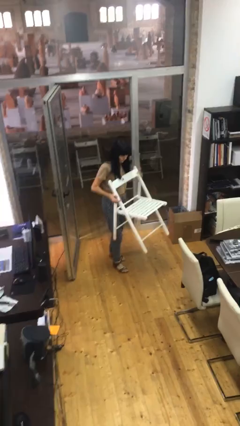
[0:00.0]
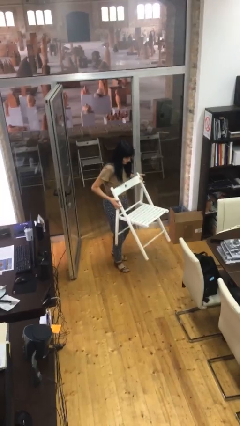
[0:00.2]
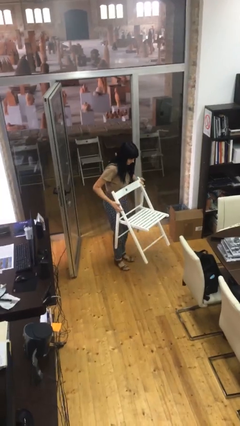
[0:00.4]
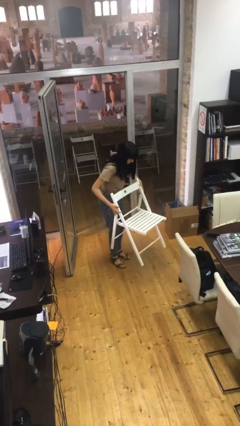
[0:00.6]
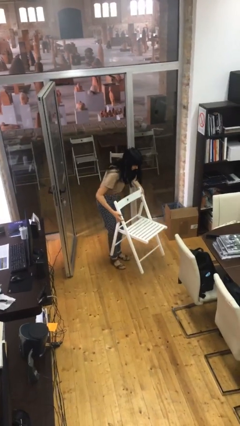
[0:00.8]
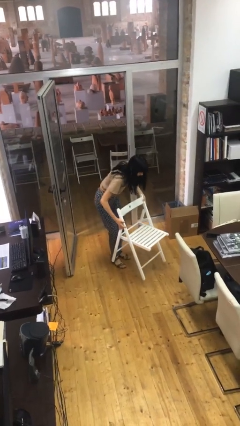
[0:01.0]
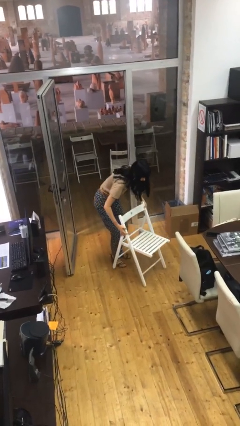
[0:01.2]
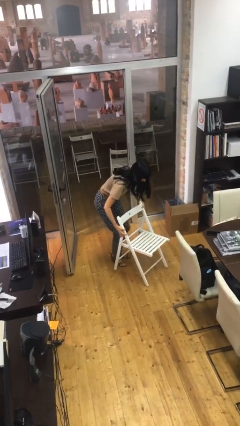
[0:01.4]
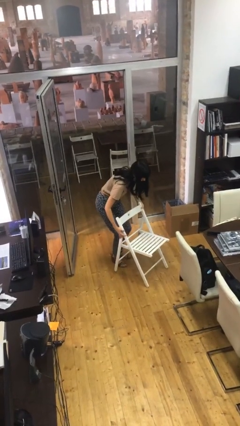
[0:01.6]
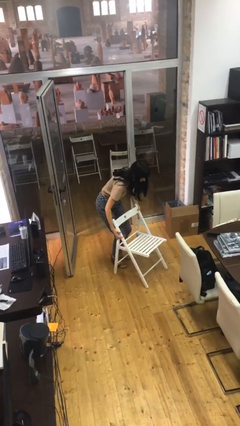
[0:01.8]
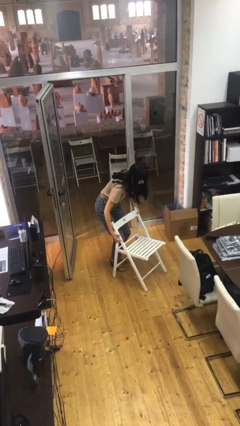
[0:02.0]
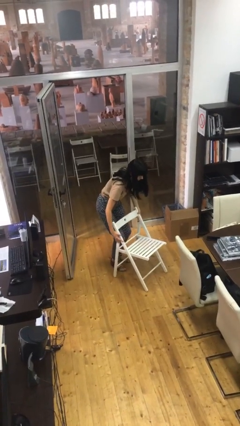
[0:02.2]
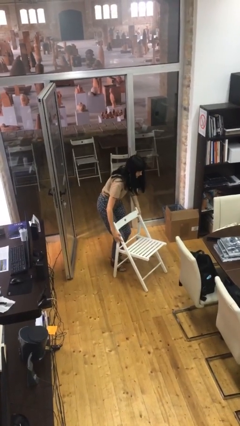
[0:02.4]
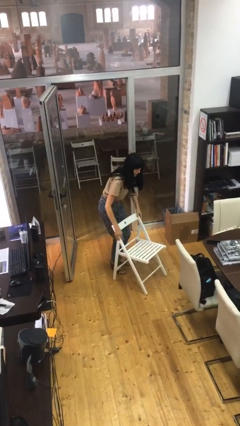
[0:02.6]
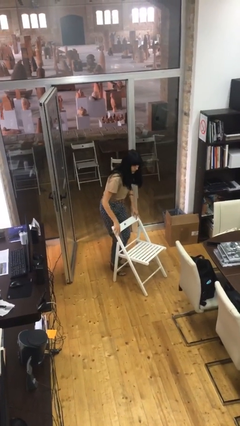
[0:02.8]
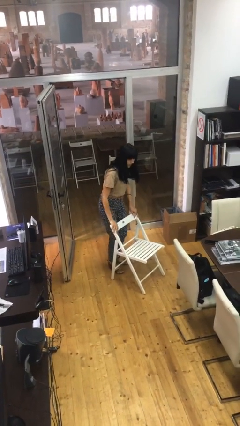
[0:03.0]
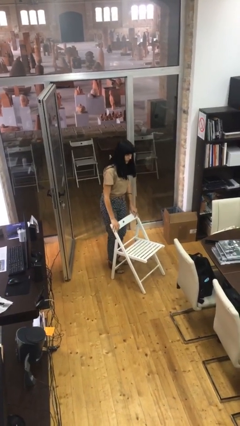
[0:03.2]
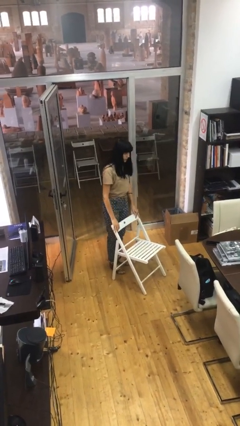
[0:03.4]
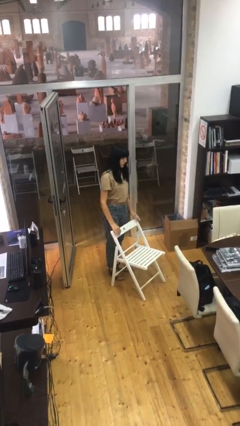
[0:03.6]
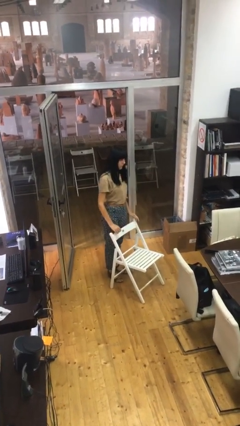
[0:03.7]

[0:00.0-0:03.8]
person puts down object on floor

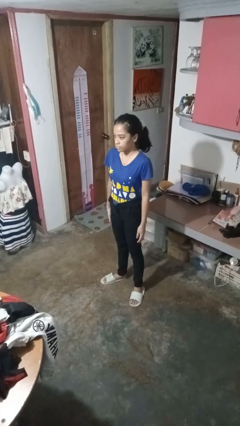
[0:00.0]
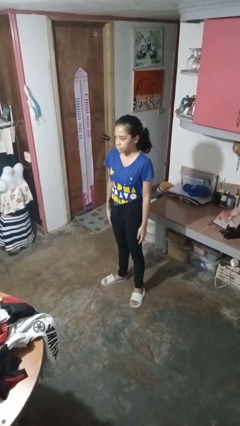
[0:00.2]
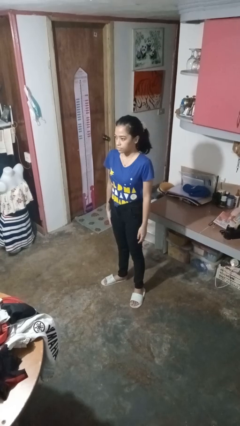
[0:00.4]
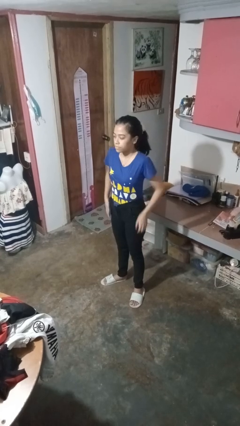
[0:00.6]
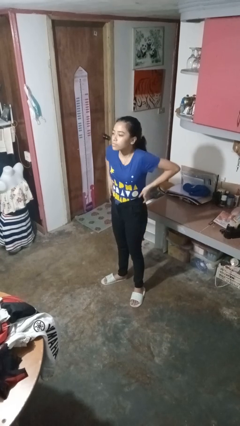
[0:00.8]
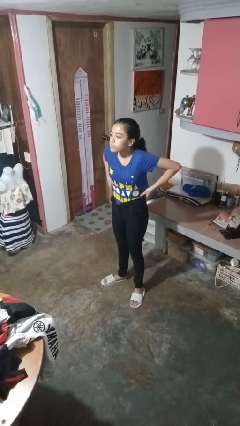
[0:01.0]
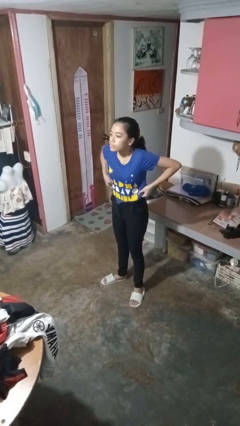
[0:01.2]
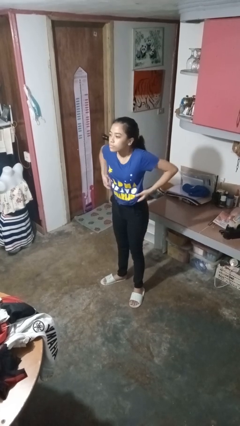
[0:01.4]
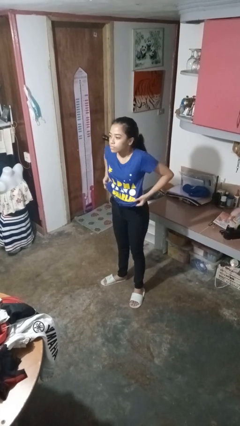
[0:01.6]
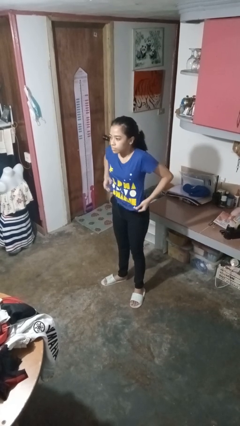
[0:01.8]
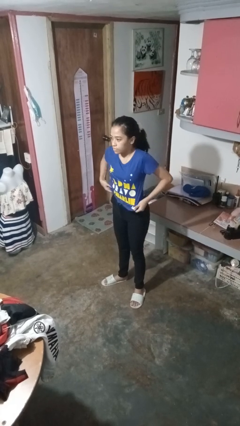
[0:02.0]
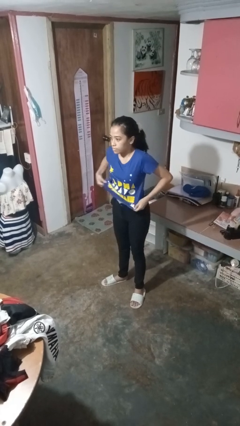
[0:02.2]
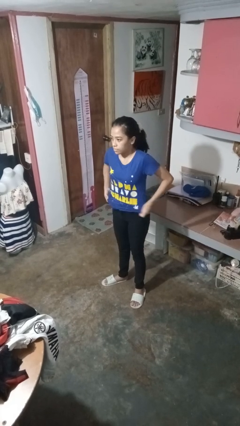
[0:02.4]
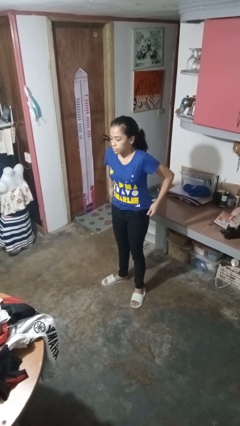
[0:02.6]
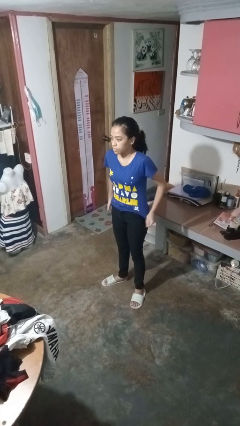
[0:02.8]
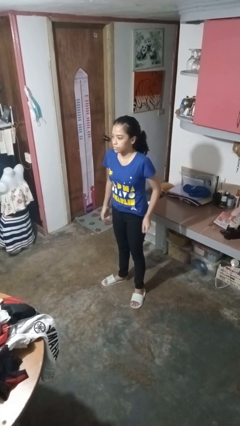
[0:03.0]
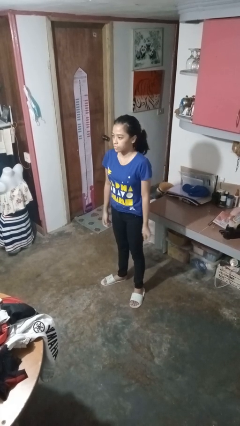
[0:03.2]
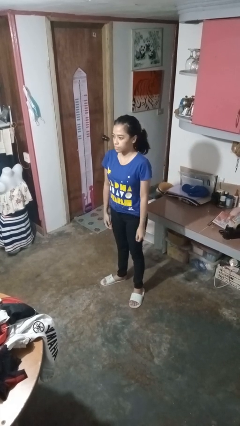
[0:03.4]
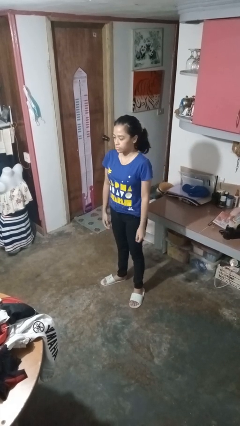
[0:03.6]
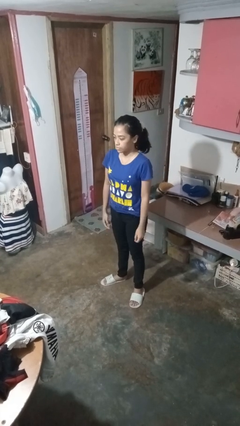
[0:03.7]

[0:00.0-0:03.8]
person untucks shirt

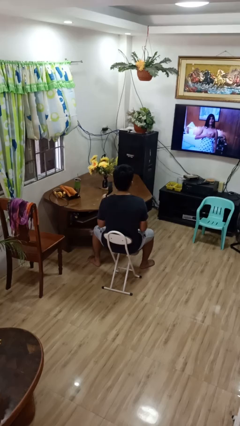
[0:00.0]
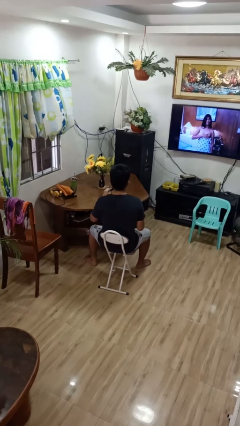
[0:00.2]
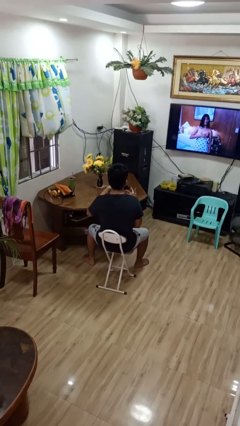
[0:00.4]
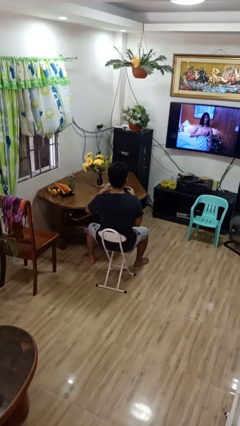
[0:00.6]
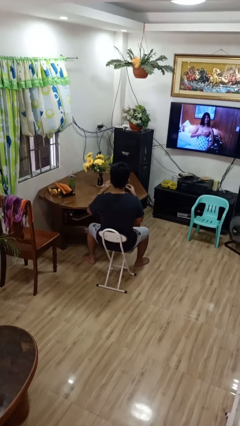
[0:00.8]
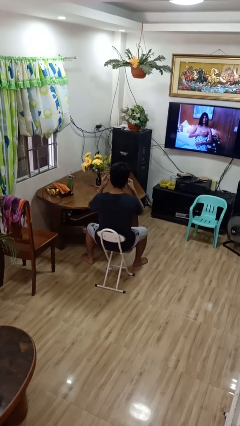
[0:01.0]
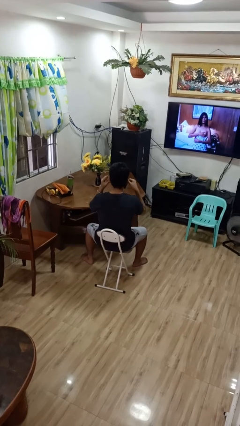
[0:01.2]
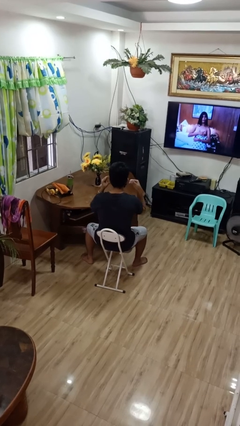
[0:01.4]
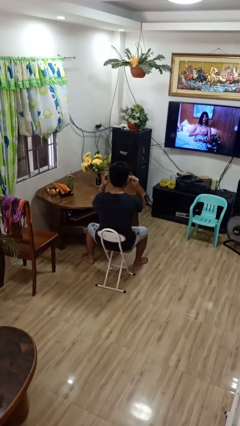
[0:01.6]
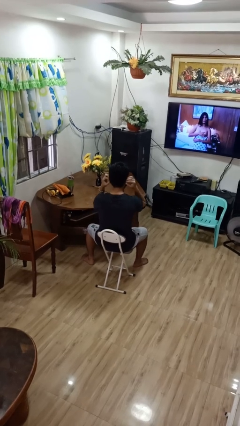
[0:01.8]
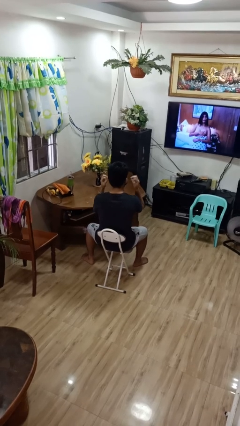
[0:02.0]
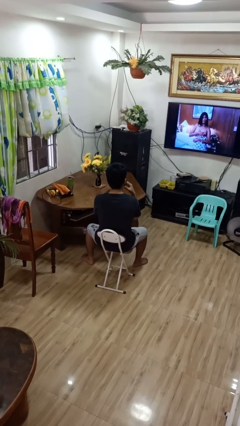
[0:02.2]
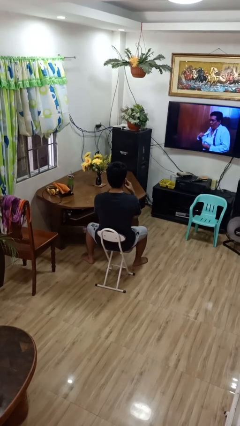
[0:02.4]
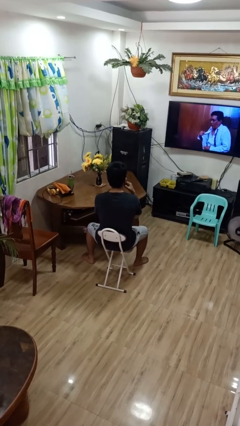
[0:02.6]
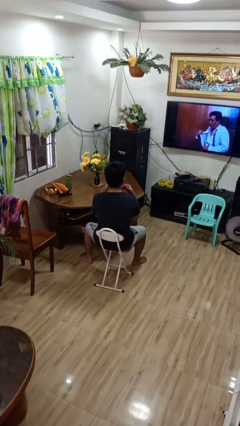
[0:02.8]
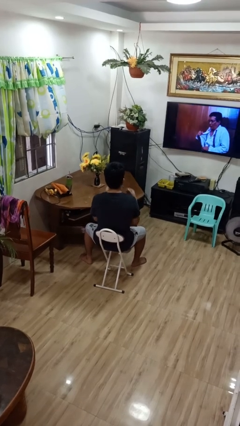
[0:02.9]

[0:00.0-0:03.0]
person puts on facemask

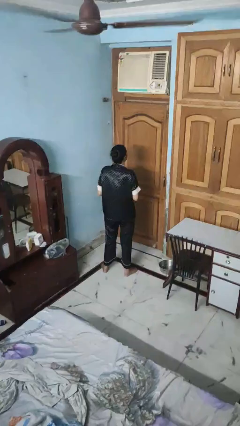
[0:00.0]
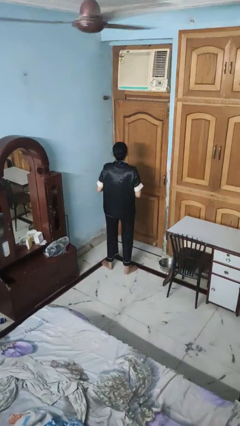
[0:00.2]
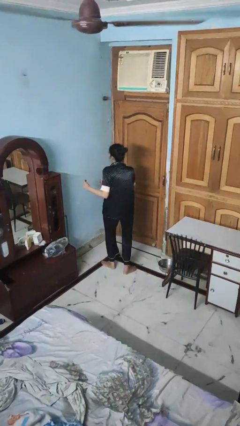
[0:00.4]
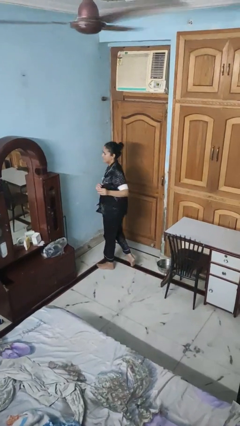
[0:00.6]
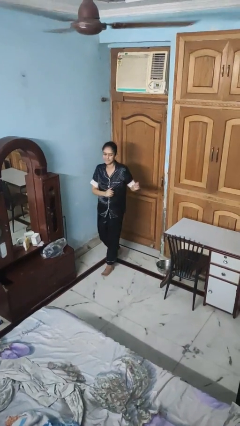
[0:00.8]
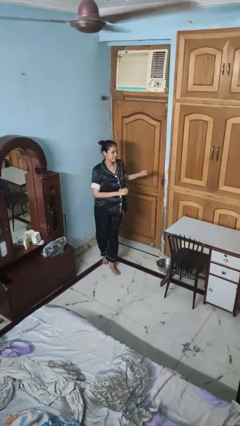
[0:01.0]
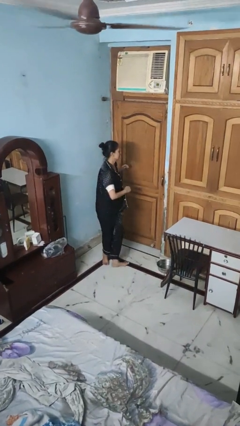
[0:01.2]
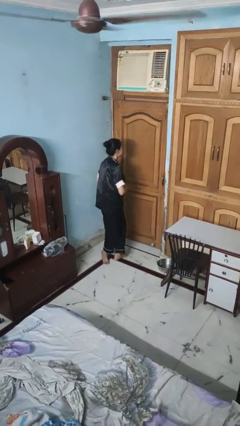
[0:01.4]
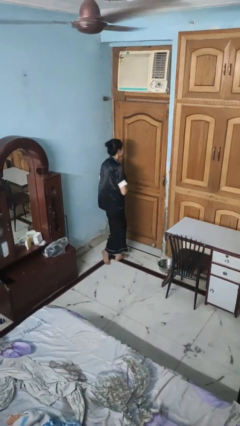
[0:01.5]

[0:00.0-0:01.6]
person twirls

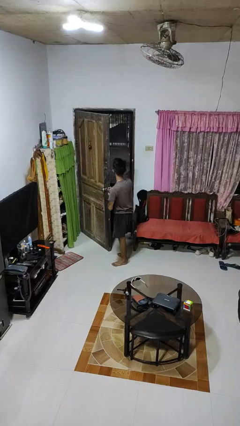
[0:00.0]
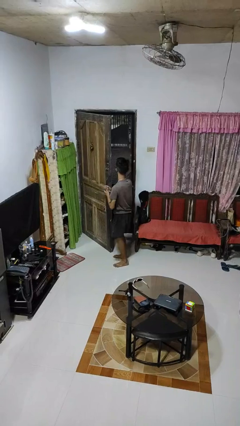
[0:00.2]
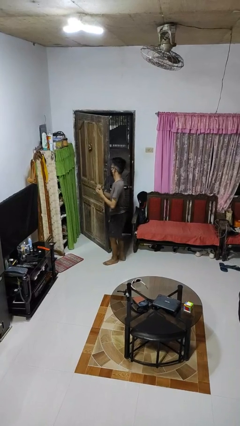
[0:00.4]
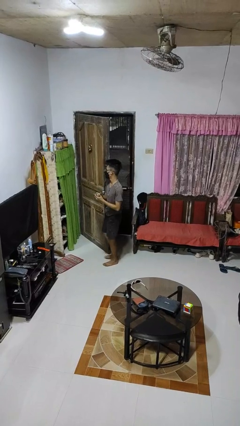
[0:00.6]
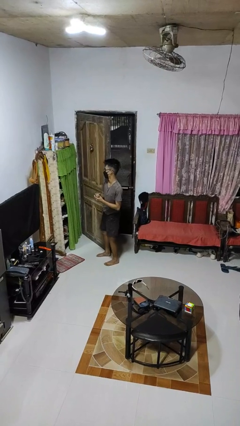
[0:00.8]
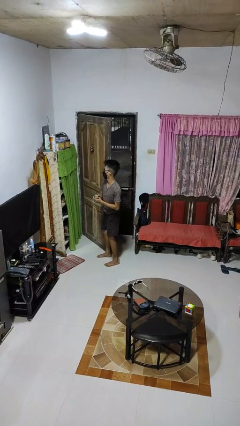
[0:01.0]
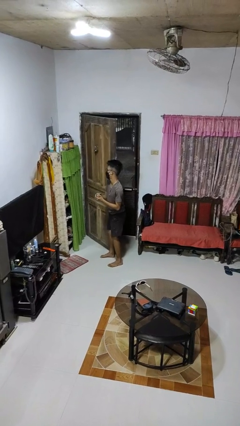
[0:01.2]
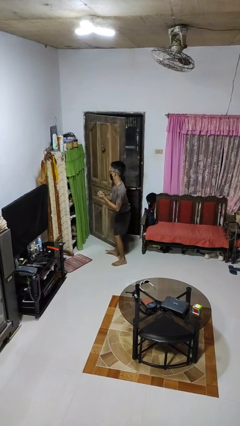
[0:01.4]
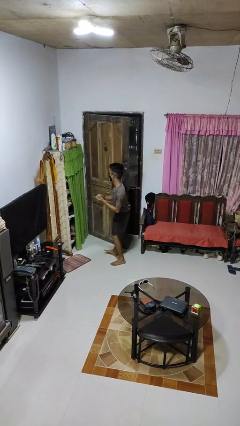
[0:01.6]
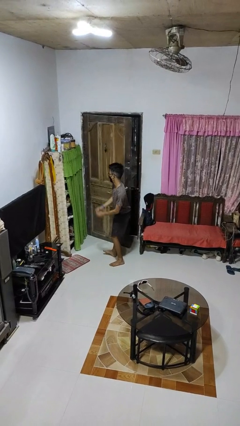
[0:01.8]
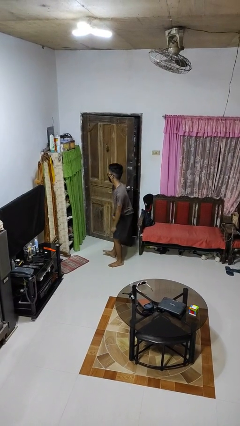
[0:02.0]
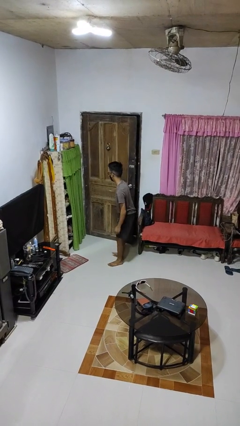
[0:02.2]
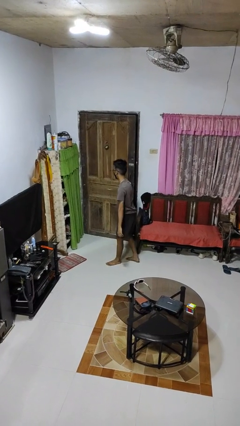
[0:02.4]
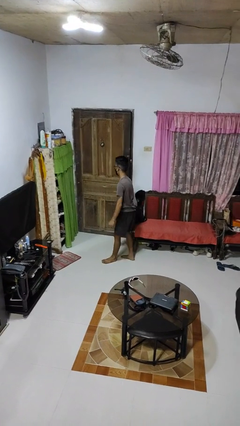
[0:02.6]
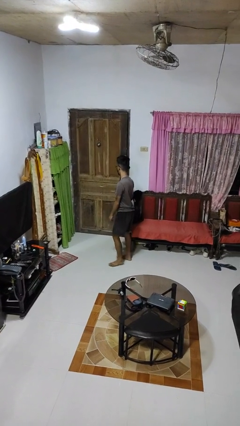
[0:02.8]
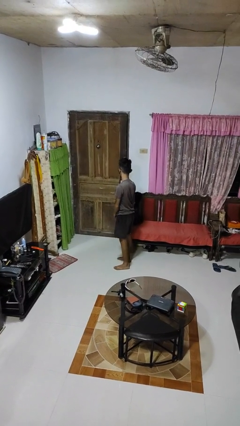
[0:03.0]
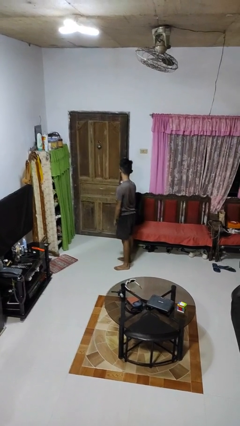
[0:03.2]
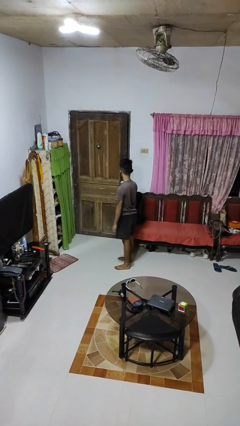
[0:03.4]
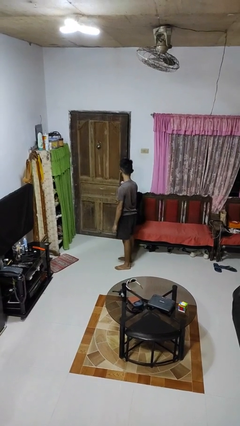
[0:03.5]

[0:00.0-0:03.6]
person closes door with hip

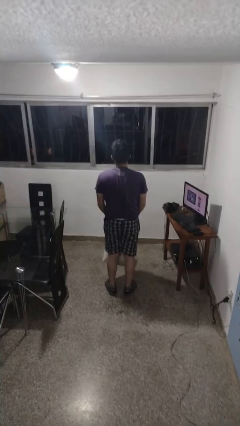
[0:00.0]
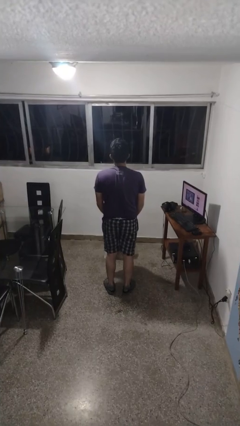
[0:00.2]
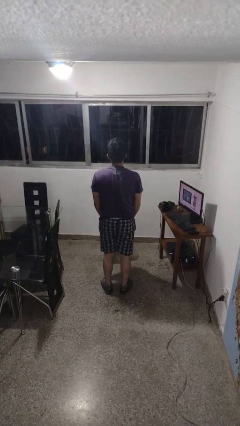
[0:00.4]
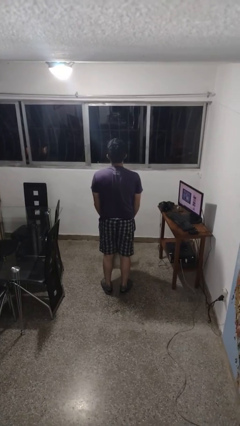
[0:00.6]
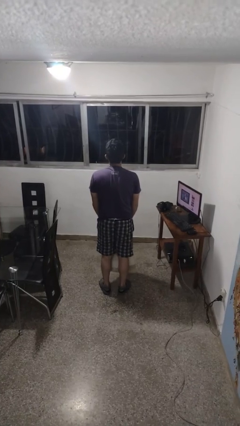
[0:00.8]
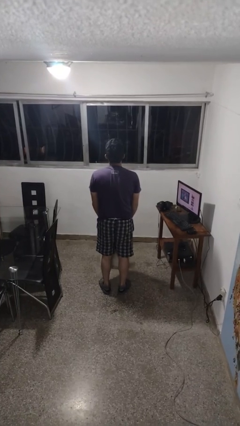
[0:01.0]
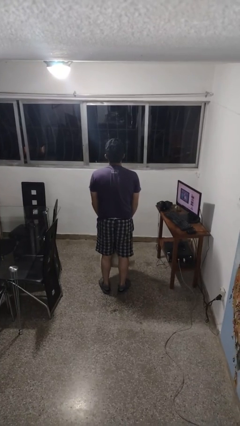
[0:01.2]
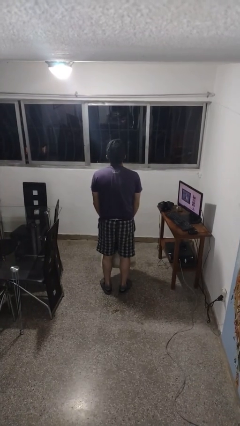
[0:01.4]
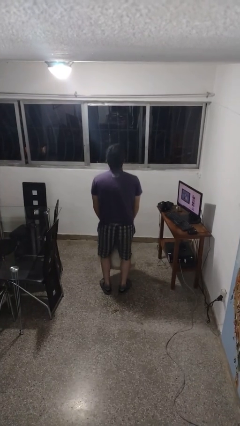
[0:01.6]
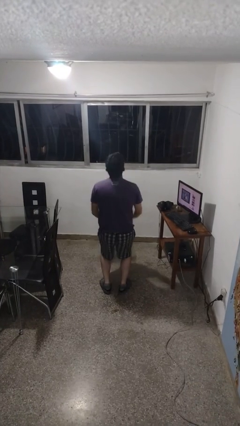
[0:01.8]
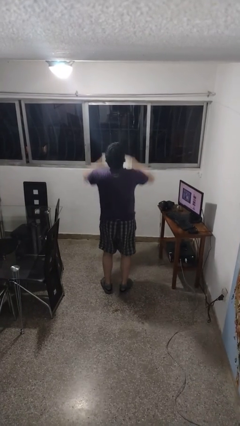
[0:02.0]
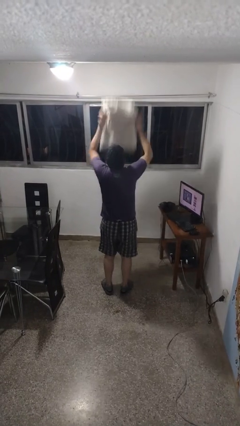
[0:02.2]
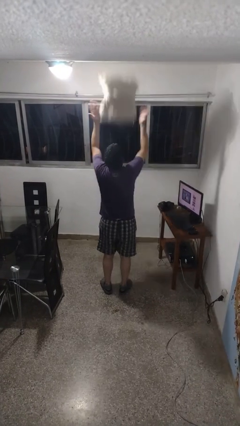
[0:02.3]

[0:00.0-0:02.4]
person drops object
